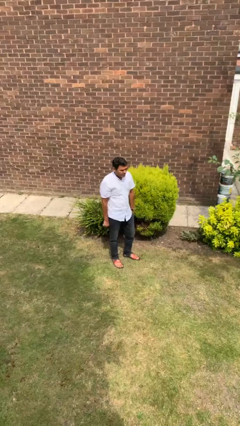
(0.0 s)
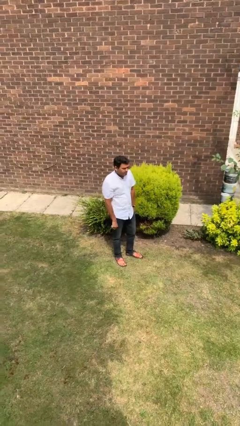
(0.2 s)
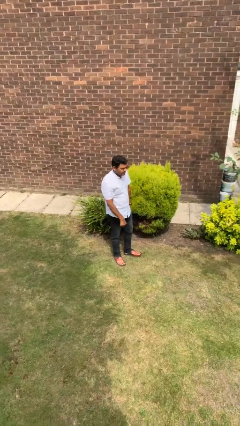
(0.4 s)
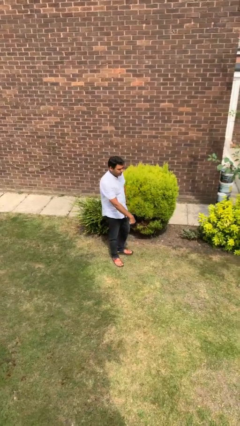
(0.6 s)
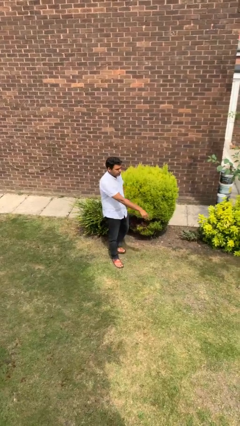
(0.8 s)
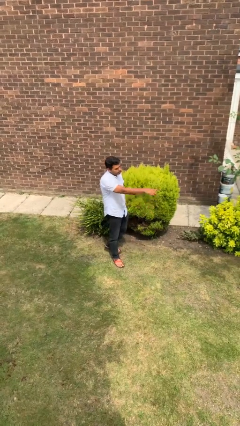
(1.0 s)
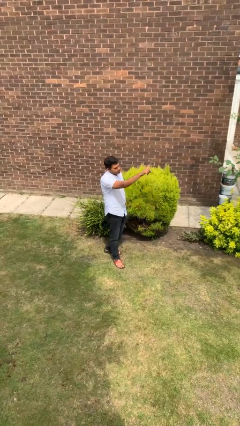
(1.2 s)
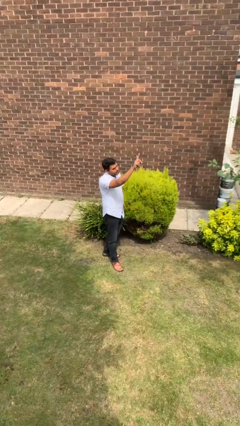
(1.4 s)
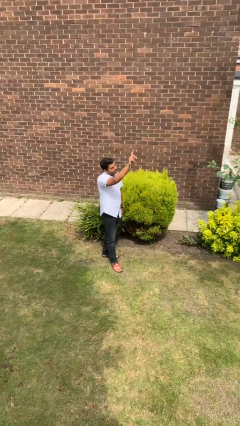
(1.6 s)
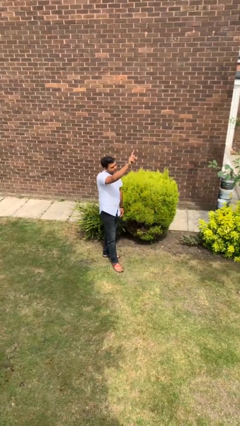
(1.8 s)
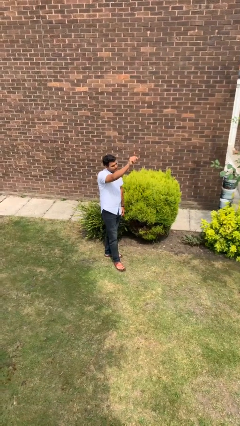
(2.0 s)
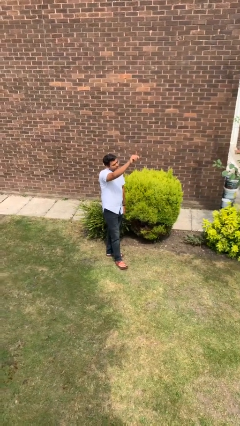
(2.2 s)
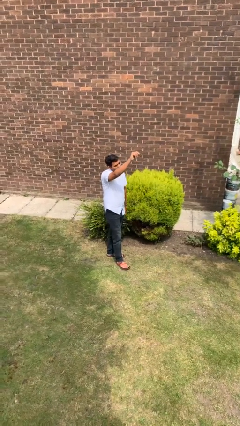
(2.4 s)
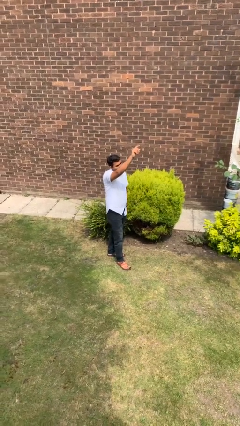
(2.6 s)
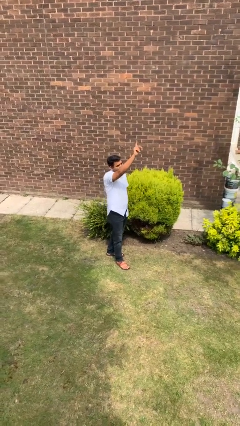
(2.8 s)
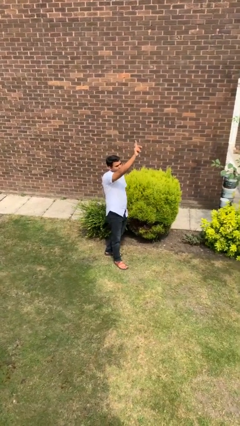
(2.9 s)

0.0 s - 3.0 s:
person gestures swipe up

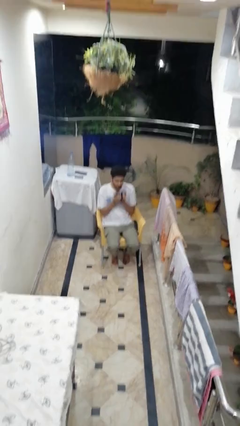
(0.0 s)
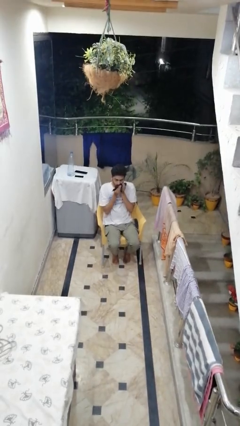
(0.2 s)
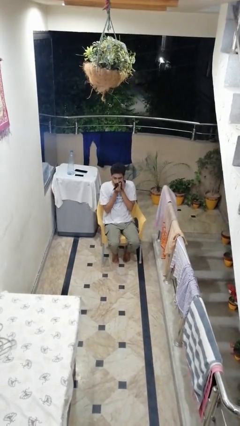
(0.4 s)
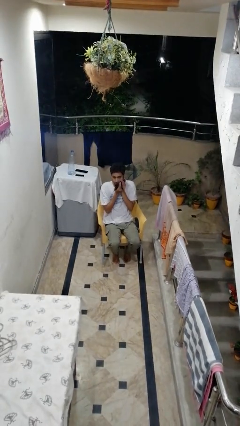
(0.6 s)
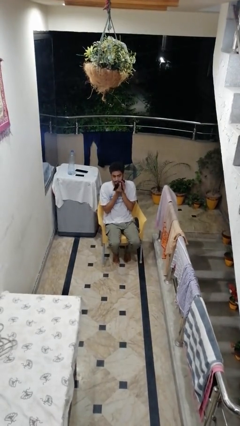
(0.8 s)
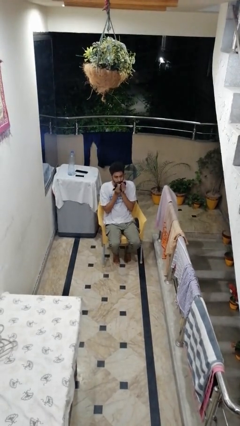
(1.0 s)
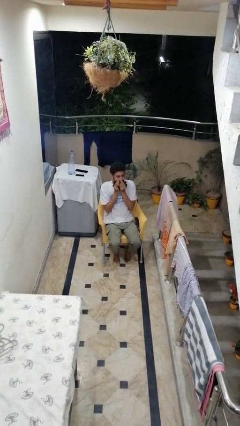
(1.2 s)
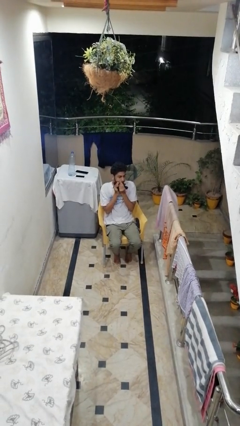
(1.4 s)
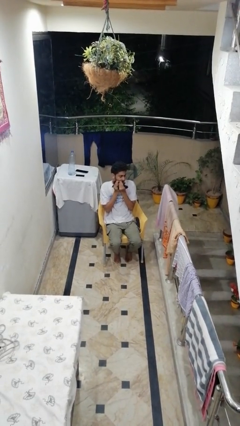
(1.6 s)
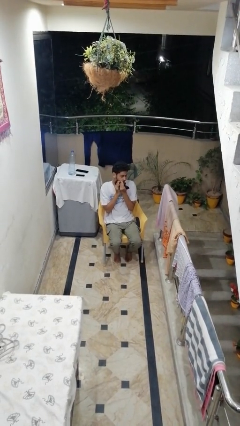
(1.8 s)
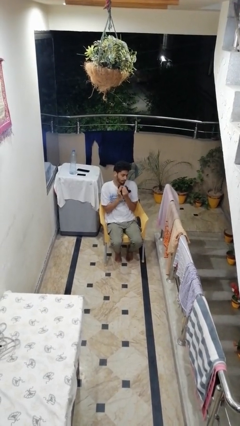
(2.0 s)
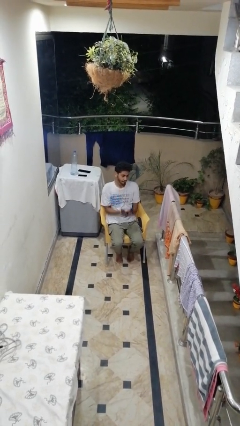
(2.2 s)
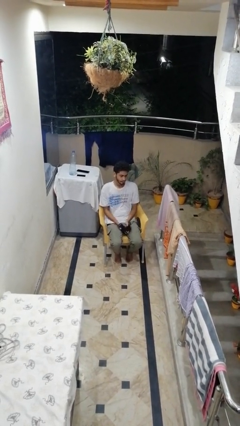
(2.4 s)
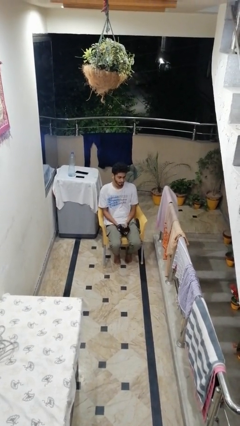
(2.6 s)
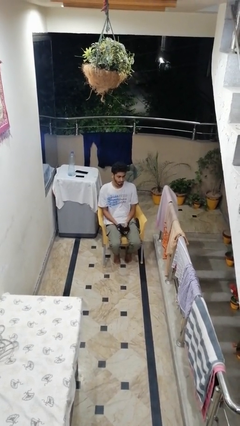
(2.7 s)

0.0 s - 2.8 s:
person wipes mouth with napkin

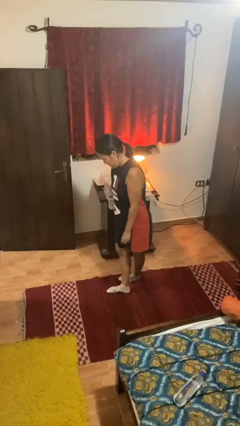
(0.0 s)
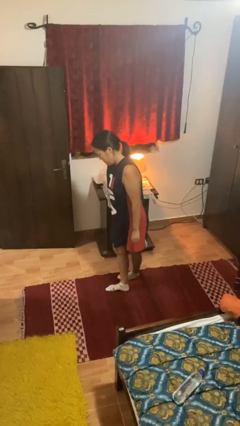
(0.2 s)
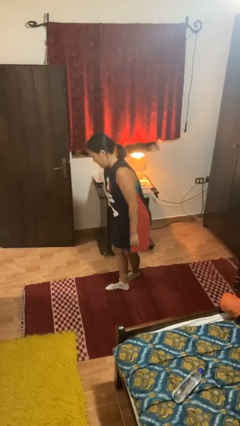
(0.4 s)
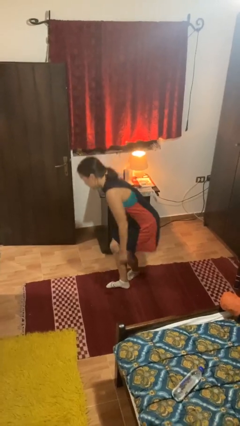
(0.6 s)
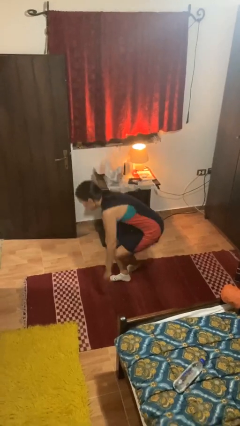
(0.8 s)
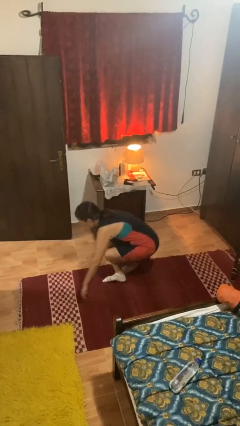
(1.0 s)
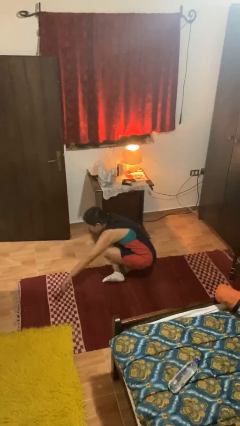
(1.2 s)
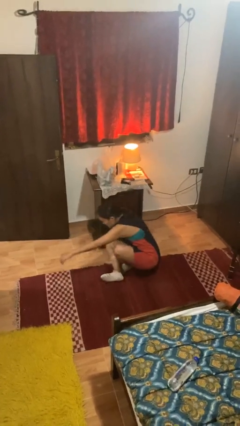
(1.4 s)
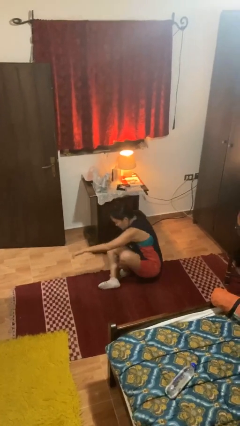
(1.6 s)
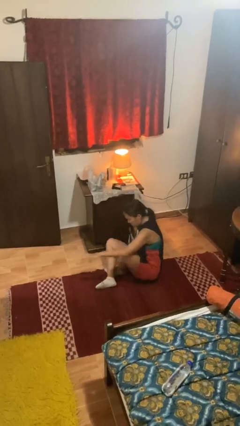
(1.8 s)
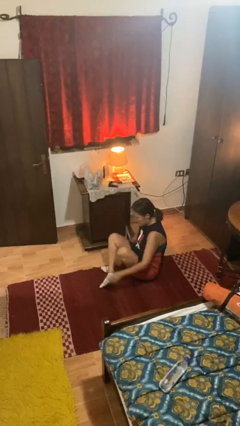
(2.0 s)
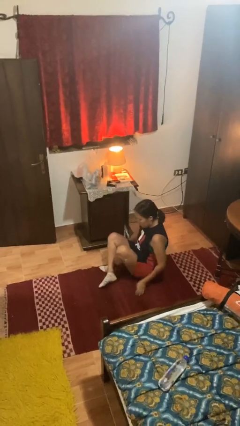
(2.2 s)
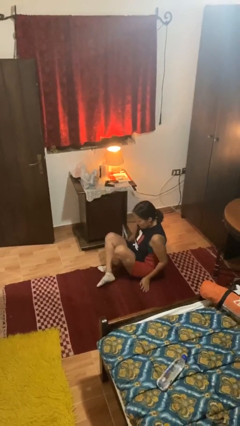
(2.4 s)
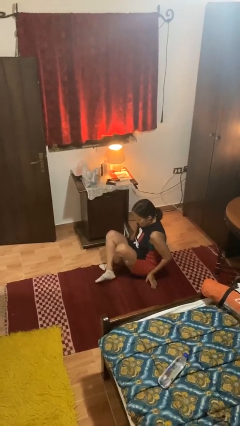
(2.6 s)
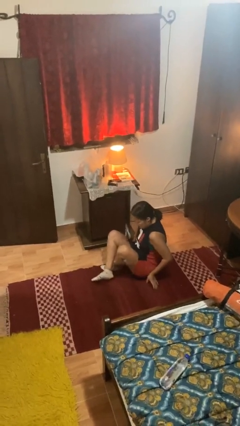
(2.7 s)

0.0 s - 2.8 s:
person sits crisscross

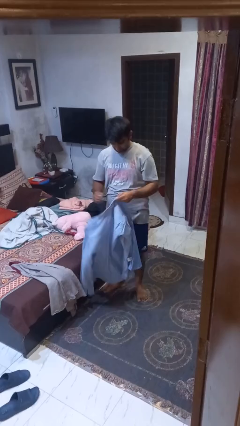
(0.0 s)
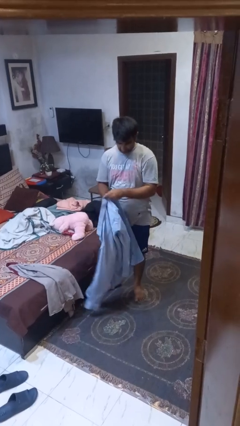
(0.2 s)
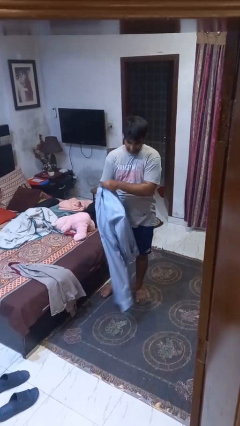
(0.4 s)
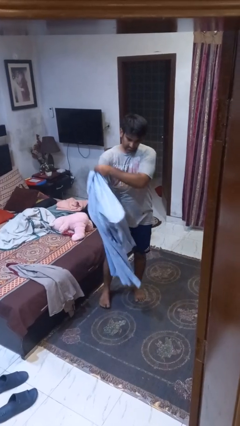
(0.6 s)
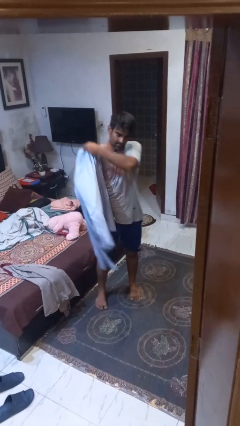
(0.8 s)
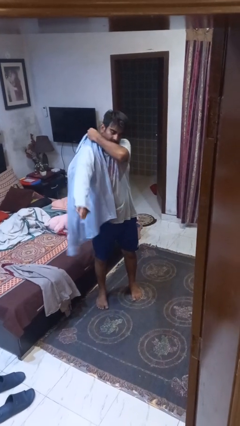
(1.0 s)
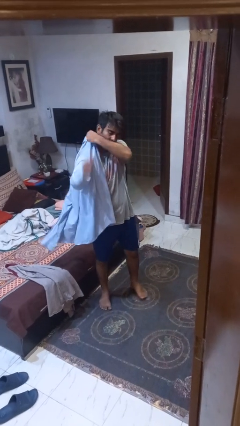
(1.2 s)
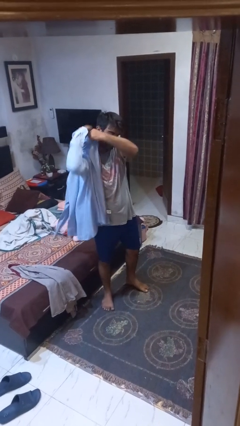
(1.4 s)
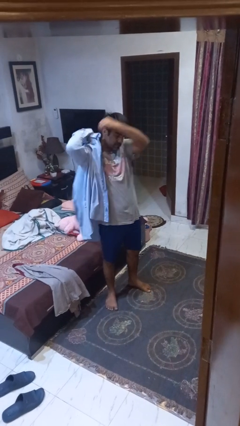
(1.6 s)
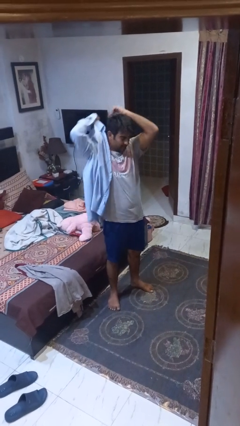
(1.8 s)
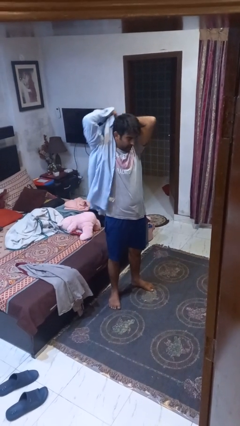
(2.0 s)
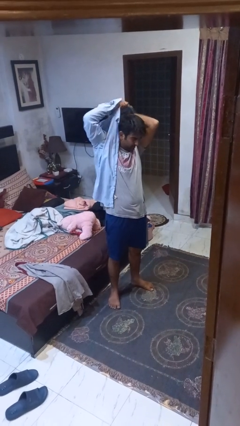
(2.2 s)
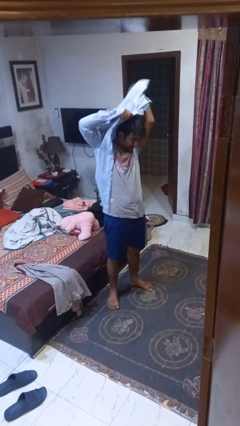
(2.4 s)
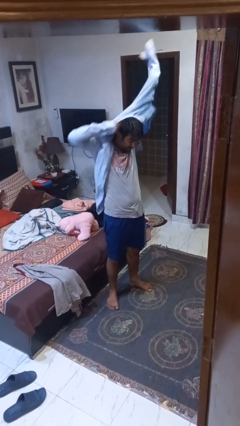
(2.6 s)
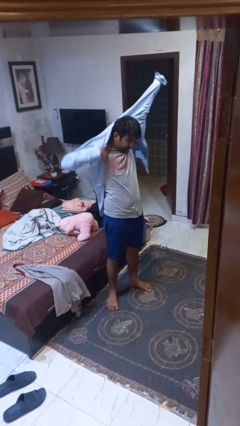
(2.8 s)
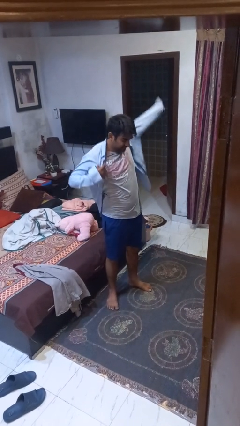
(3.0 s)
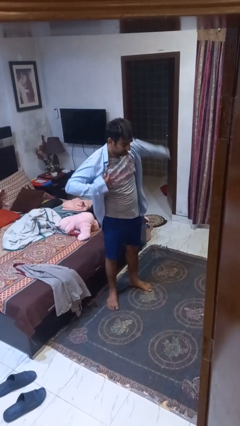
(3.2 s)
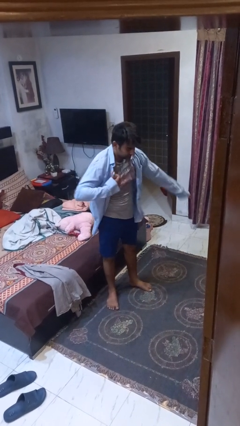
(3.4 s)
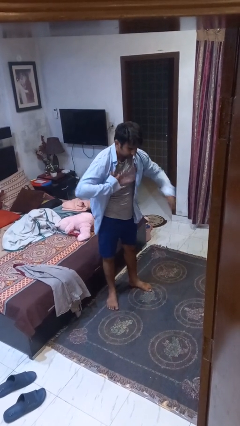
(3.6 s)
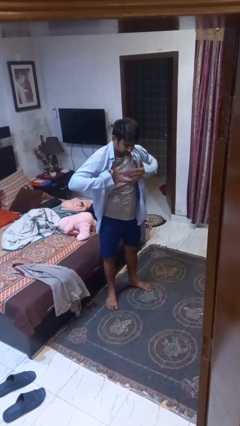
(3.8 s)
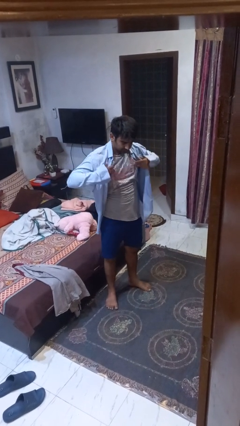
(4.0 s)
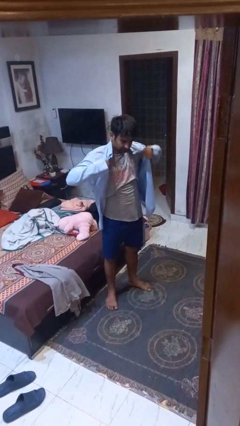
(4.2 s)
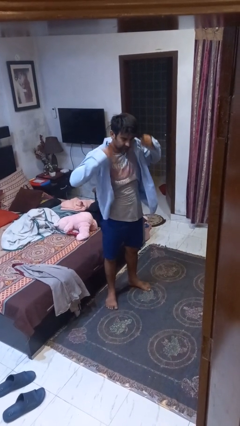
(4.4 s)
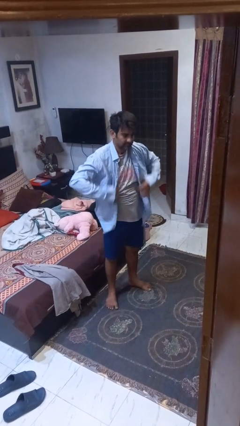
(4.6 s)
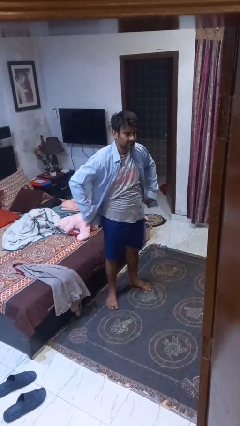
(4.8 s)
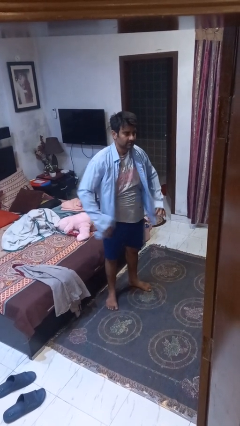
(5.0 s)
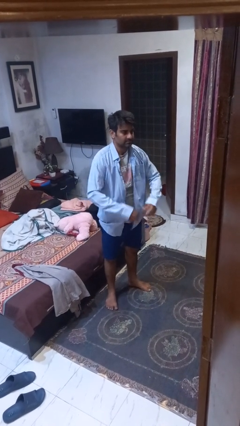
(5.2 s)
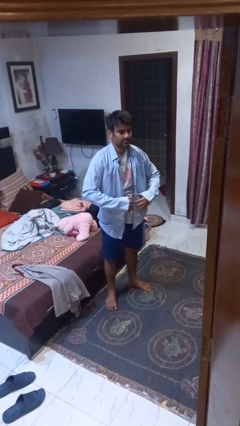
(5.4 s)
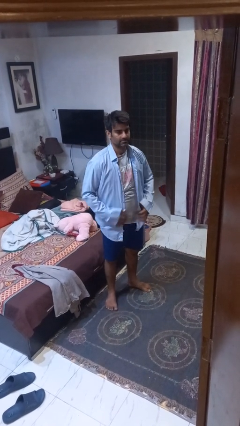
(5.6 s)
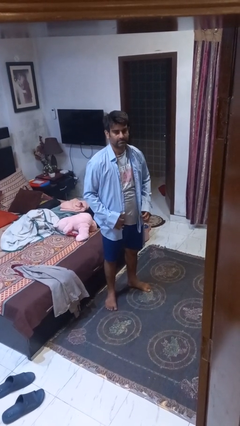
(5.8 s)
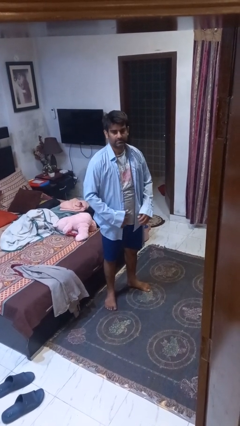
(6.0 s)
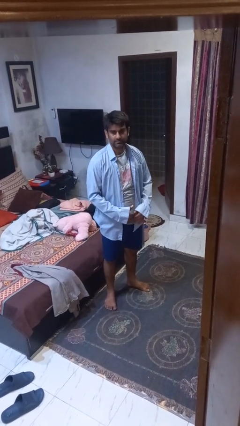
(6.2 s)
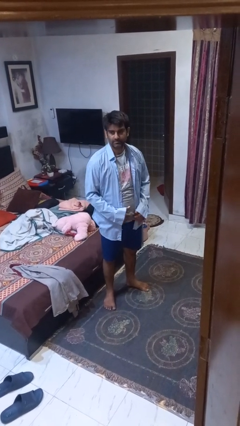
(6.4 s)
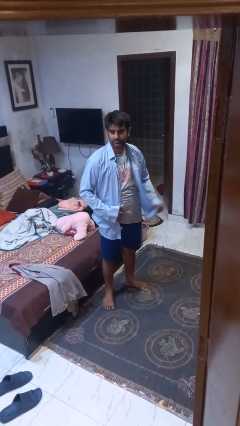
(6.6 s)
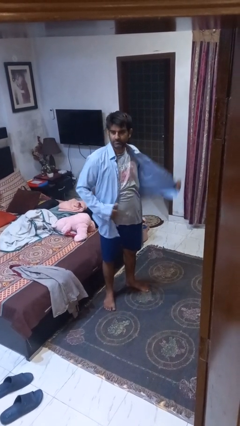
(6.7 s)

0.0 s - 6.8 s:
person puts on shirt

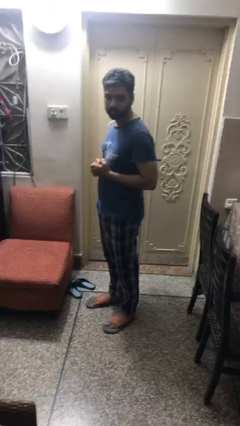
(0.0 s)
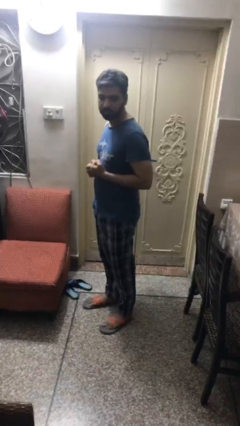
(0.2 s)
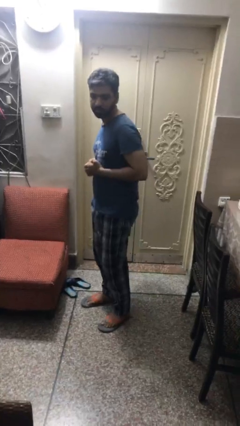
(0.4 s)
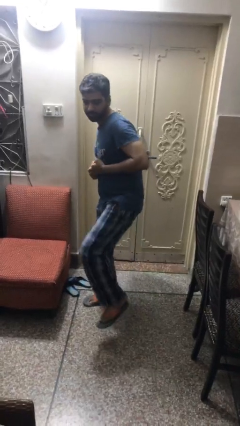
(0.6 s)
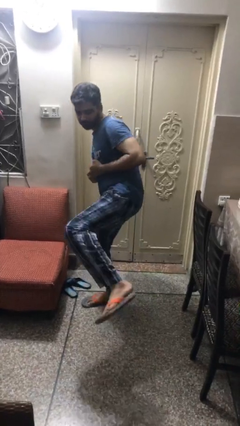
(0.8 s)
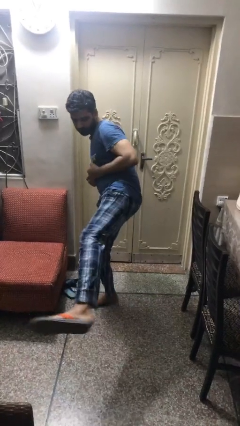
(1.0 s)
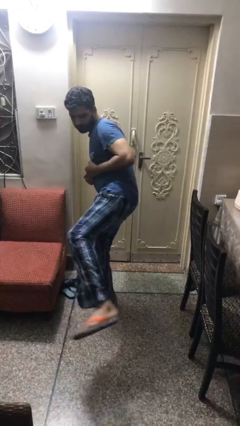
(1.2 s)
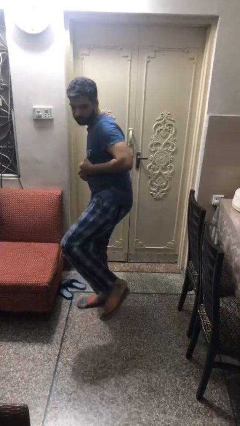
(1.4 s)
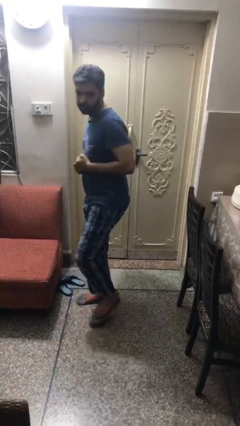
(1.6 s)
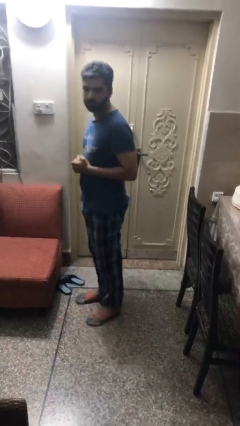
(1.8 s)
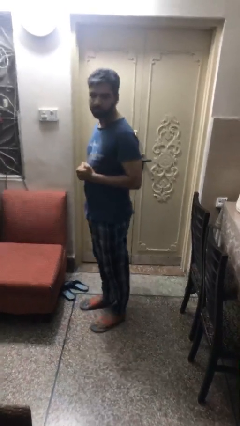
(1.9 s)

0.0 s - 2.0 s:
person karate kicks

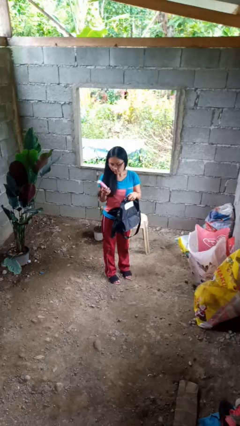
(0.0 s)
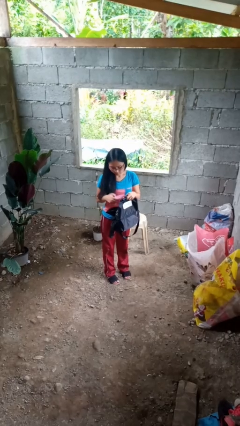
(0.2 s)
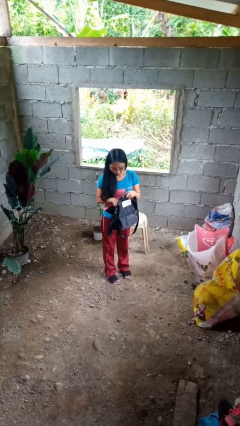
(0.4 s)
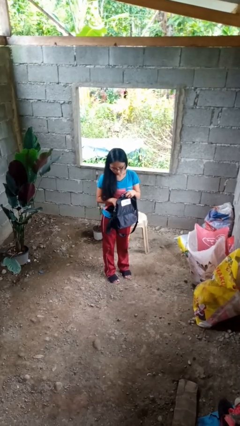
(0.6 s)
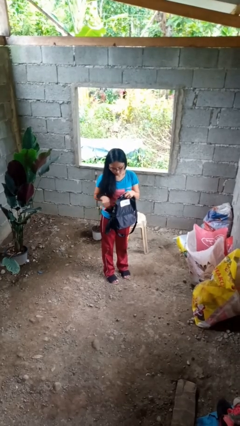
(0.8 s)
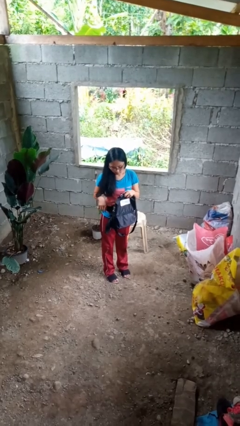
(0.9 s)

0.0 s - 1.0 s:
person puts object into backpack
